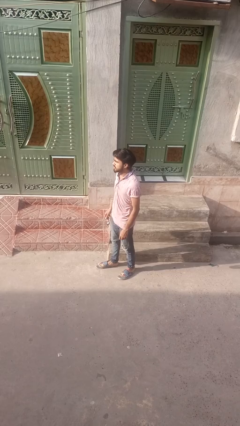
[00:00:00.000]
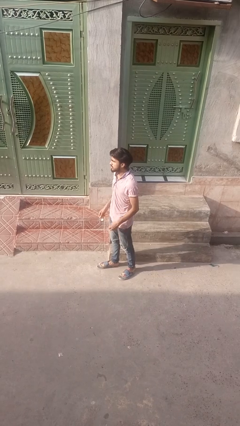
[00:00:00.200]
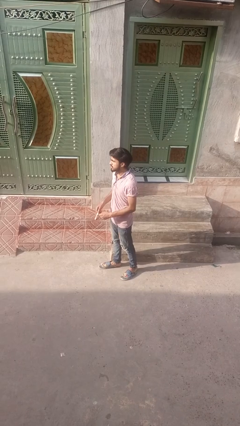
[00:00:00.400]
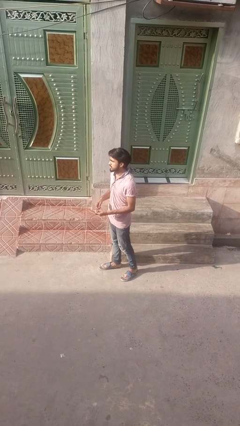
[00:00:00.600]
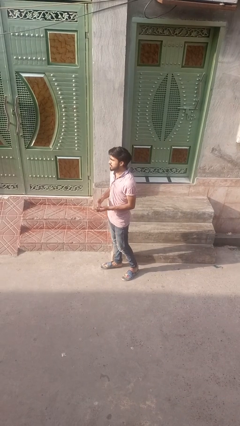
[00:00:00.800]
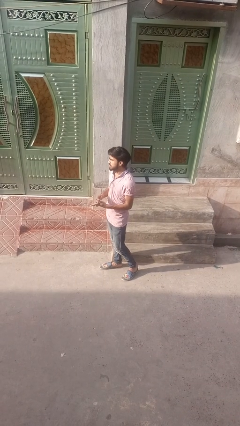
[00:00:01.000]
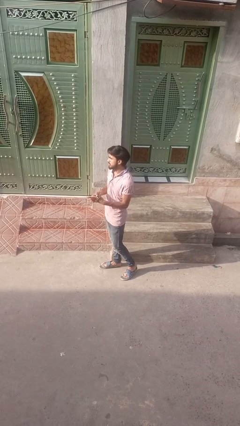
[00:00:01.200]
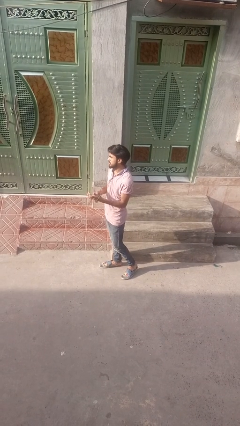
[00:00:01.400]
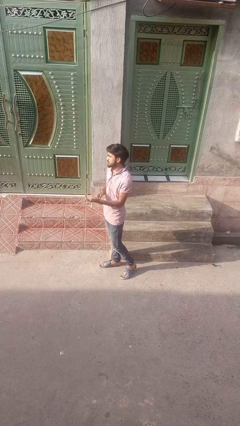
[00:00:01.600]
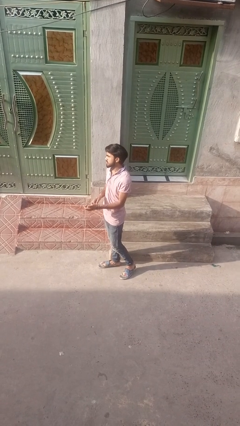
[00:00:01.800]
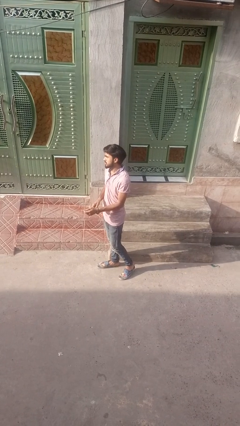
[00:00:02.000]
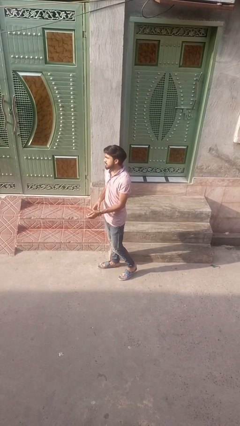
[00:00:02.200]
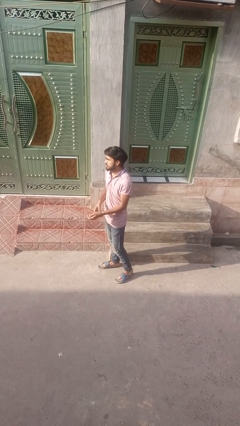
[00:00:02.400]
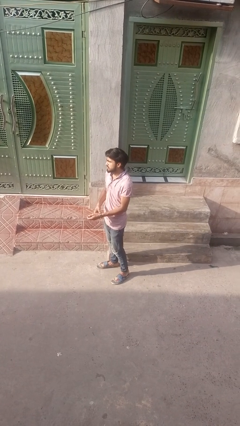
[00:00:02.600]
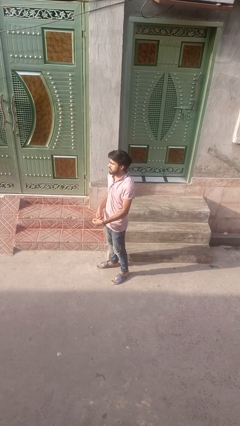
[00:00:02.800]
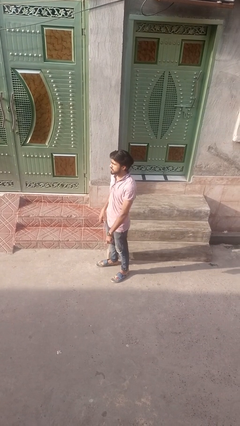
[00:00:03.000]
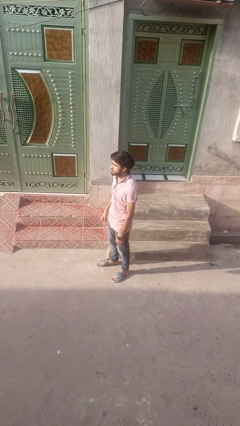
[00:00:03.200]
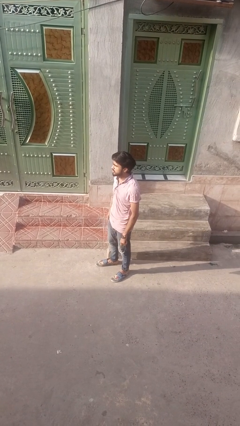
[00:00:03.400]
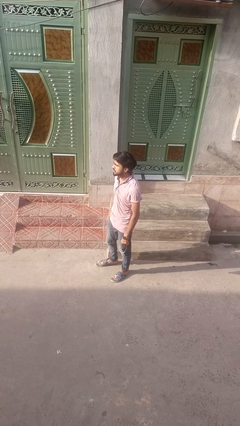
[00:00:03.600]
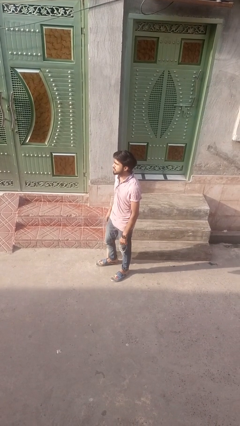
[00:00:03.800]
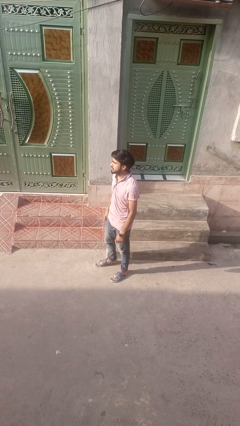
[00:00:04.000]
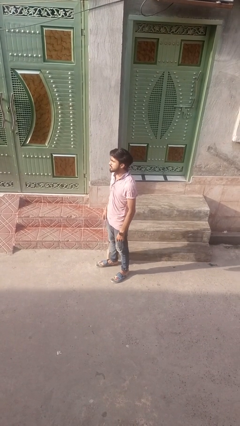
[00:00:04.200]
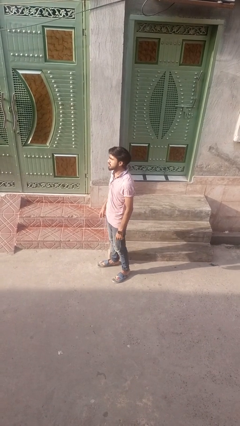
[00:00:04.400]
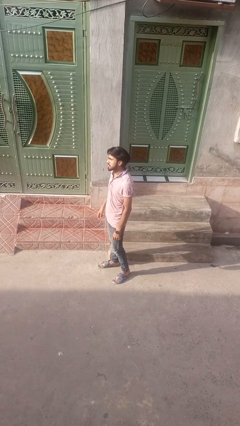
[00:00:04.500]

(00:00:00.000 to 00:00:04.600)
person puts on wristwatch

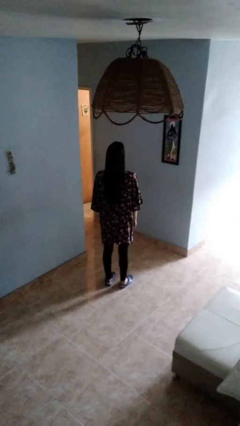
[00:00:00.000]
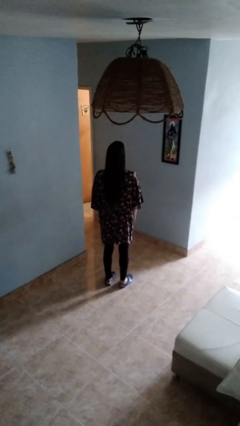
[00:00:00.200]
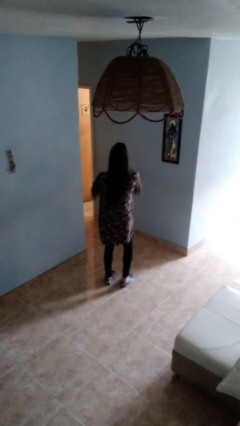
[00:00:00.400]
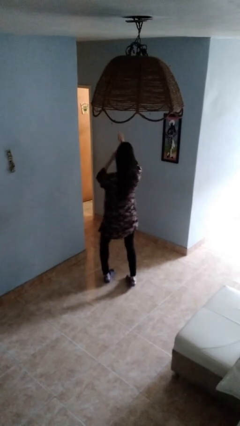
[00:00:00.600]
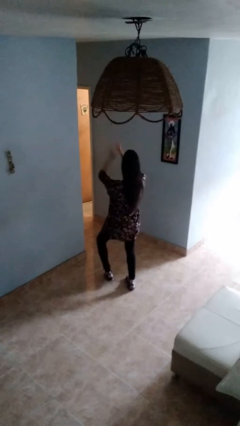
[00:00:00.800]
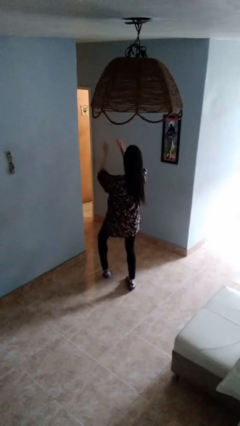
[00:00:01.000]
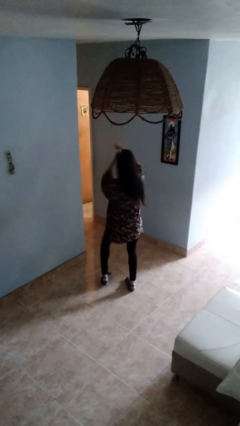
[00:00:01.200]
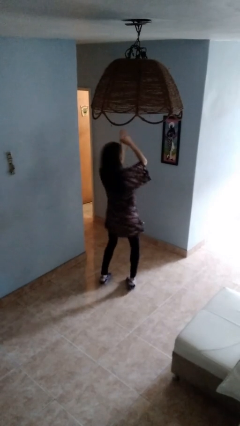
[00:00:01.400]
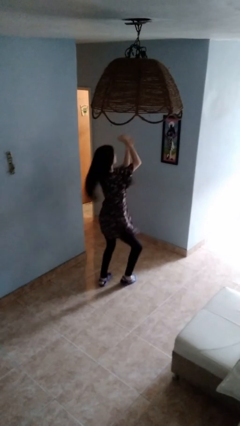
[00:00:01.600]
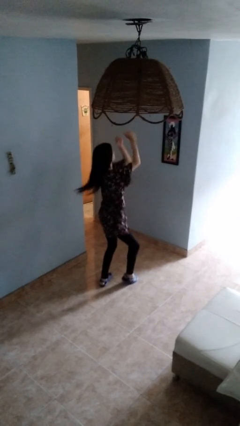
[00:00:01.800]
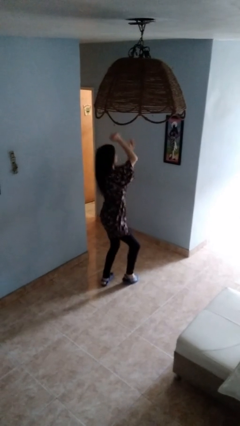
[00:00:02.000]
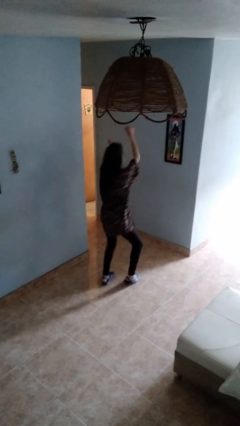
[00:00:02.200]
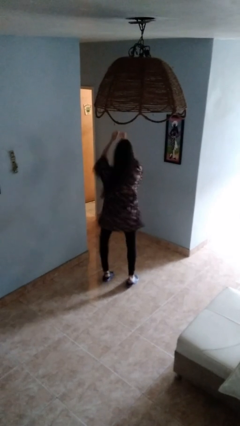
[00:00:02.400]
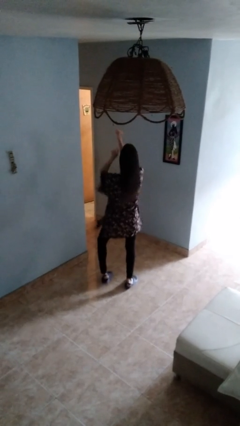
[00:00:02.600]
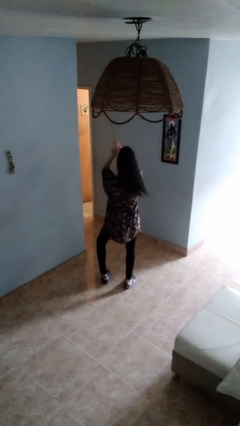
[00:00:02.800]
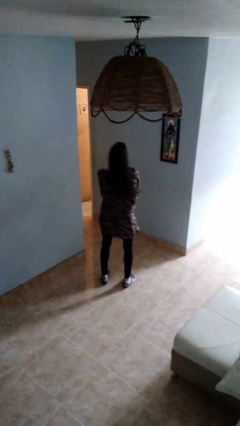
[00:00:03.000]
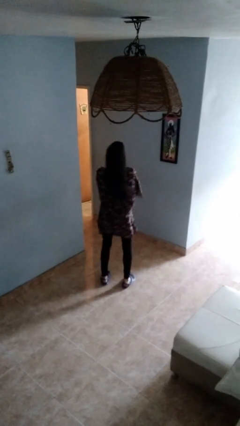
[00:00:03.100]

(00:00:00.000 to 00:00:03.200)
person dances in place

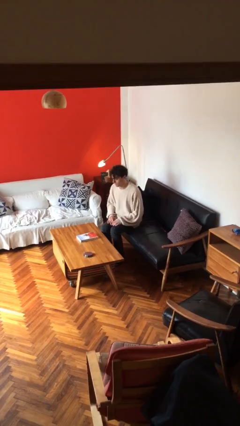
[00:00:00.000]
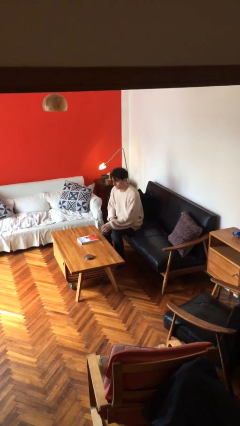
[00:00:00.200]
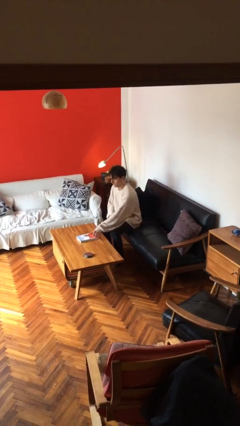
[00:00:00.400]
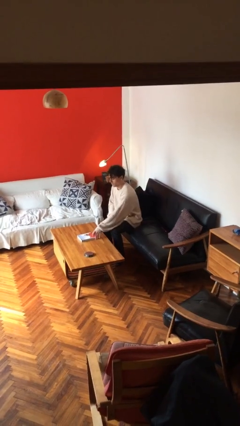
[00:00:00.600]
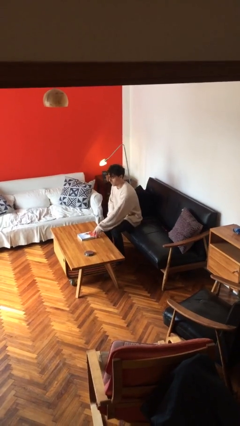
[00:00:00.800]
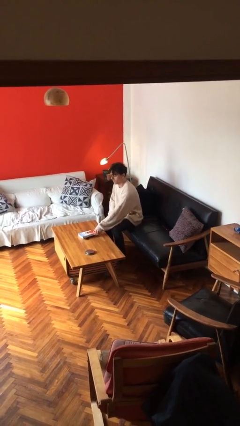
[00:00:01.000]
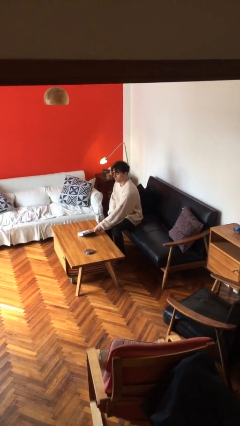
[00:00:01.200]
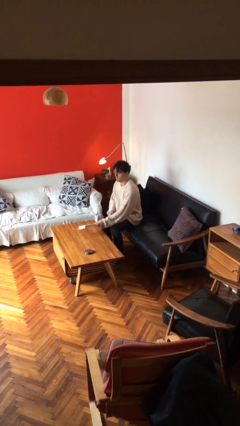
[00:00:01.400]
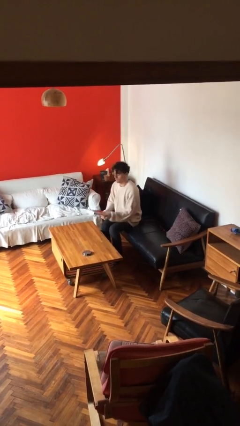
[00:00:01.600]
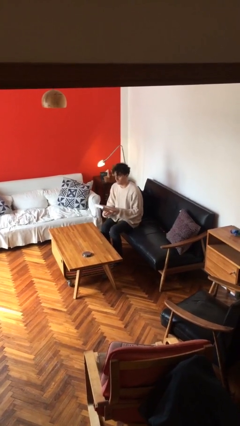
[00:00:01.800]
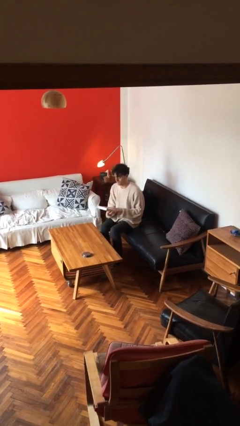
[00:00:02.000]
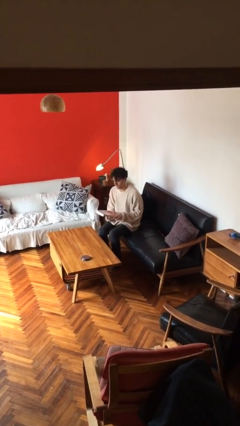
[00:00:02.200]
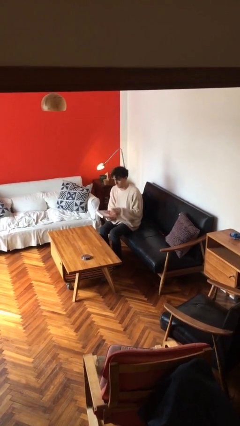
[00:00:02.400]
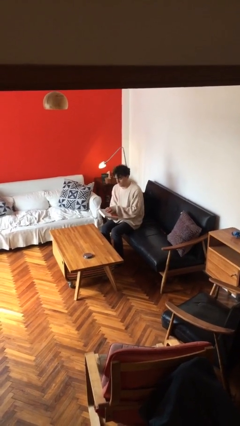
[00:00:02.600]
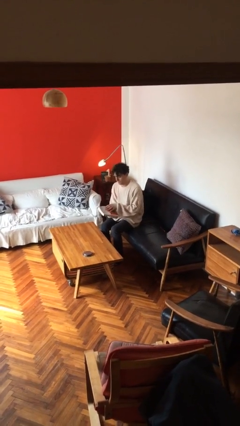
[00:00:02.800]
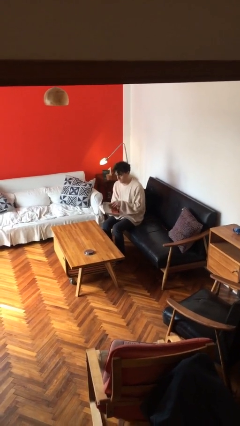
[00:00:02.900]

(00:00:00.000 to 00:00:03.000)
person picks up object from table

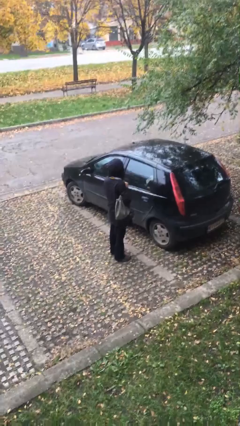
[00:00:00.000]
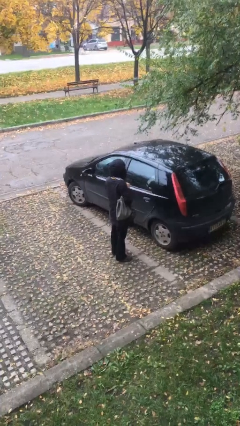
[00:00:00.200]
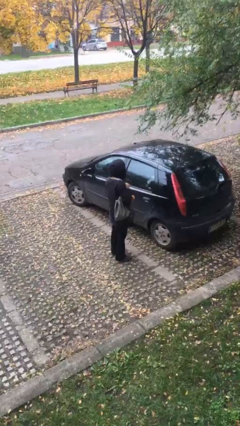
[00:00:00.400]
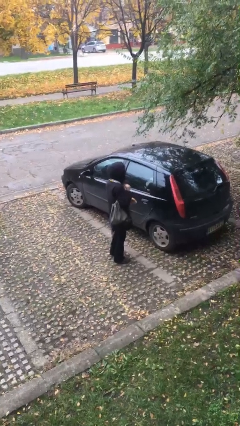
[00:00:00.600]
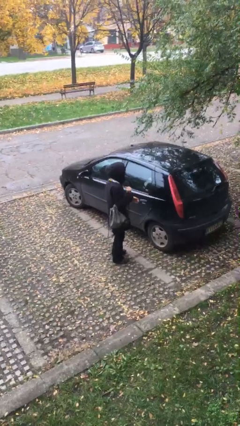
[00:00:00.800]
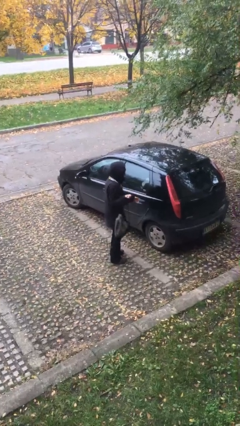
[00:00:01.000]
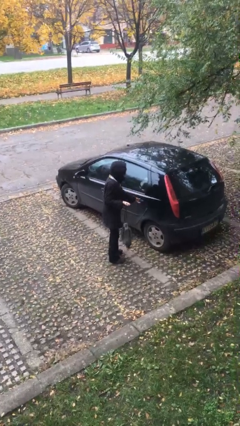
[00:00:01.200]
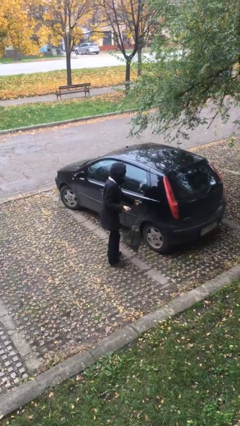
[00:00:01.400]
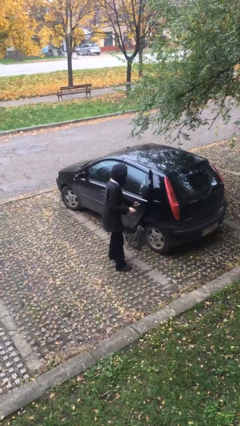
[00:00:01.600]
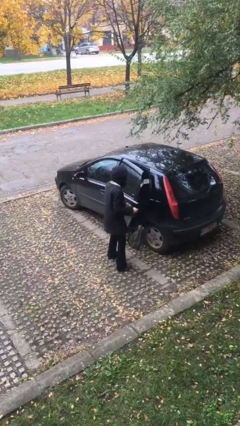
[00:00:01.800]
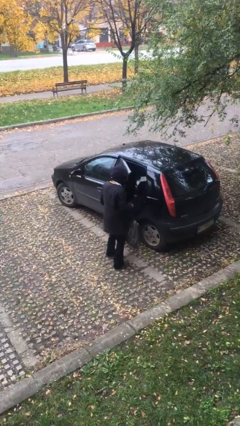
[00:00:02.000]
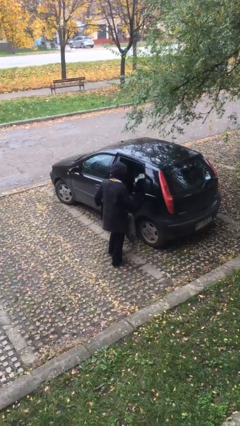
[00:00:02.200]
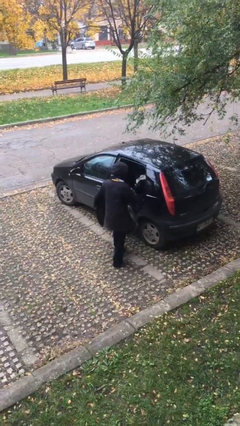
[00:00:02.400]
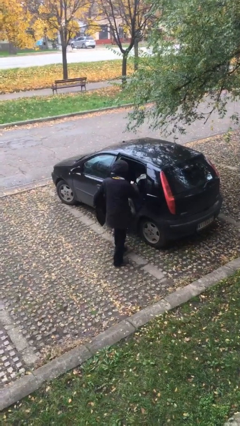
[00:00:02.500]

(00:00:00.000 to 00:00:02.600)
person opens car door

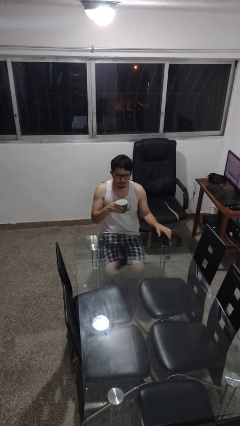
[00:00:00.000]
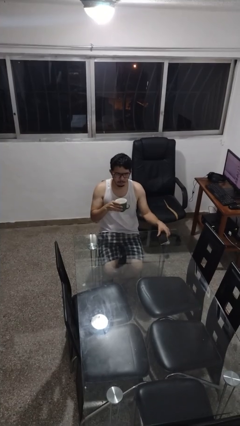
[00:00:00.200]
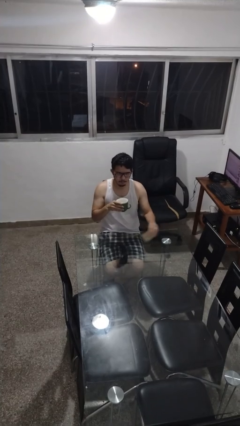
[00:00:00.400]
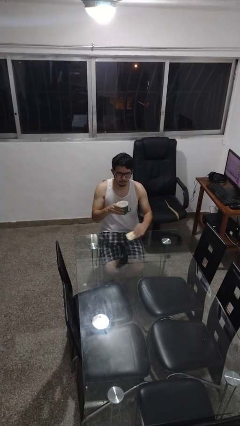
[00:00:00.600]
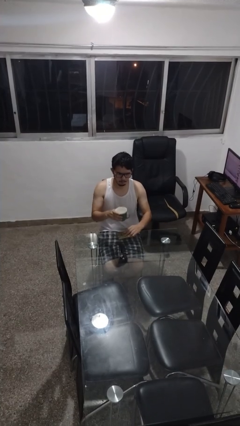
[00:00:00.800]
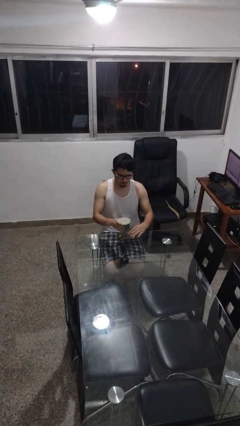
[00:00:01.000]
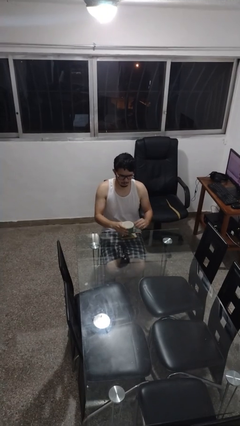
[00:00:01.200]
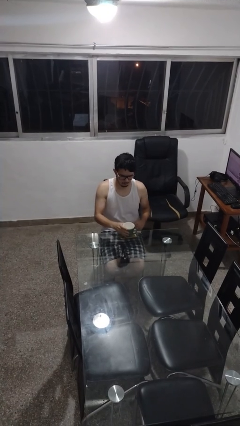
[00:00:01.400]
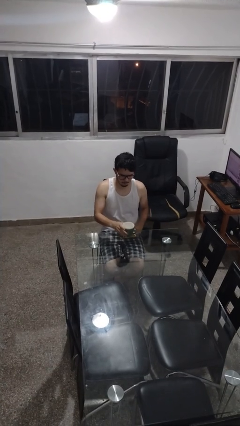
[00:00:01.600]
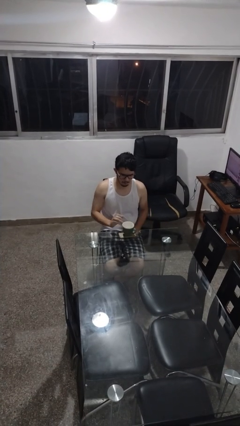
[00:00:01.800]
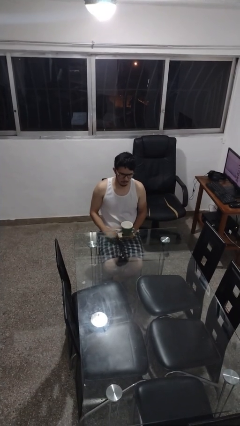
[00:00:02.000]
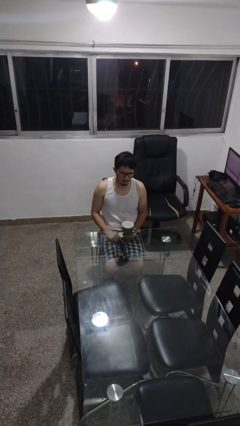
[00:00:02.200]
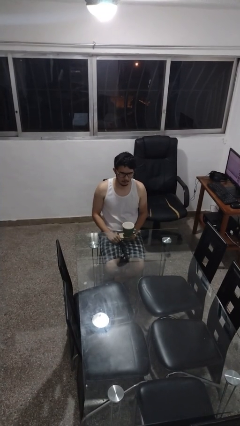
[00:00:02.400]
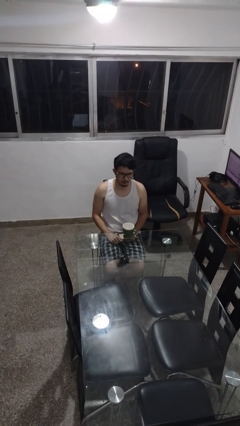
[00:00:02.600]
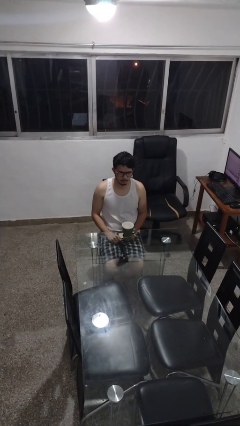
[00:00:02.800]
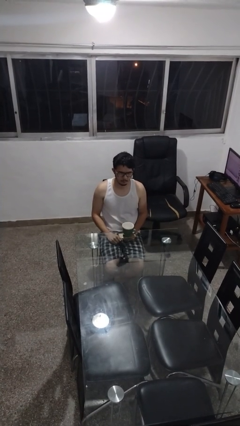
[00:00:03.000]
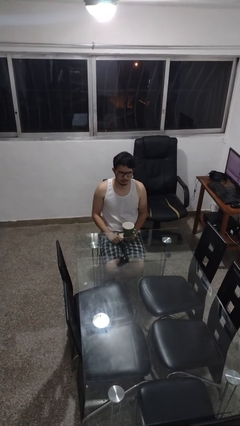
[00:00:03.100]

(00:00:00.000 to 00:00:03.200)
person puts down object on table

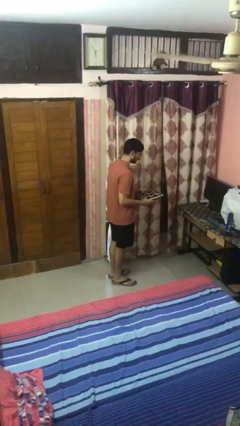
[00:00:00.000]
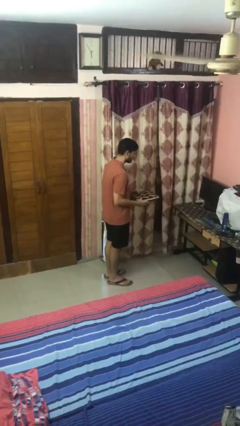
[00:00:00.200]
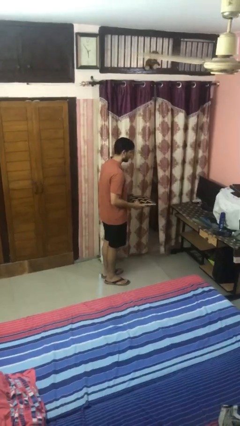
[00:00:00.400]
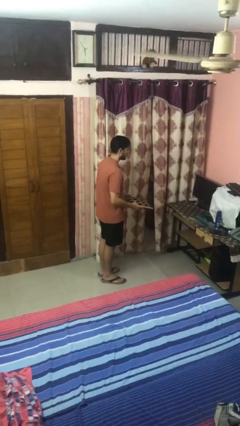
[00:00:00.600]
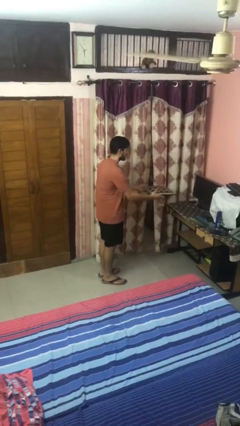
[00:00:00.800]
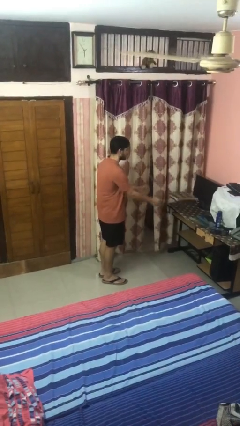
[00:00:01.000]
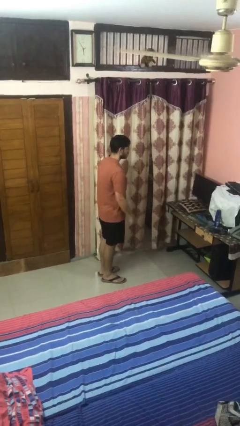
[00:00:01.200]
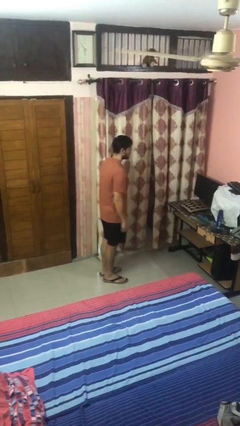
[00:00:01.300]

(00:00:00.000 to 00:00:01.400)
person throws object on table
